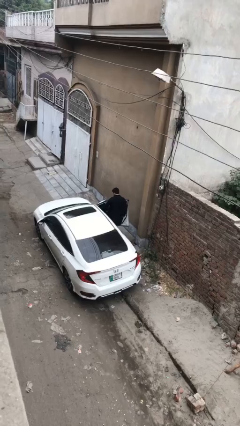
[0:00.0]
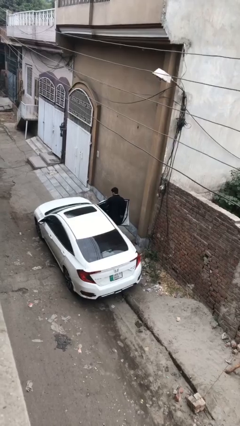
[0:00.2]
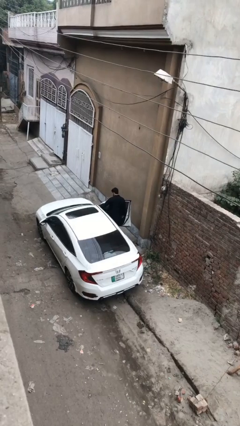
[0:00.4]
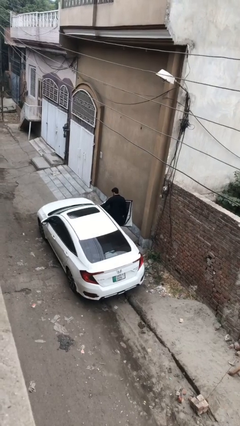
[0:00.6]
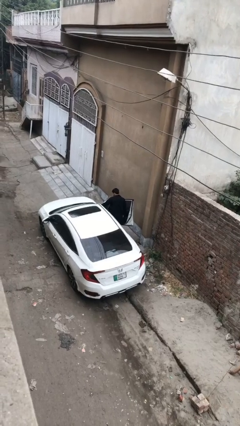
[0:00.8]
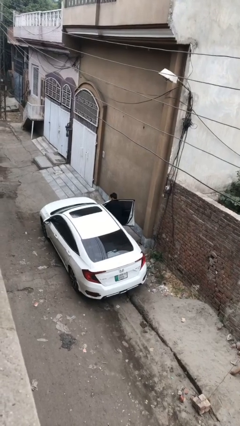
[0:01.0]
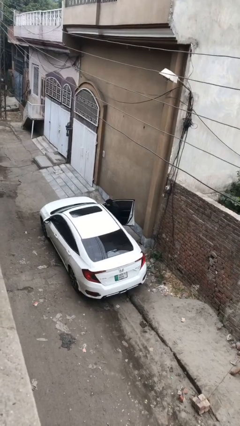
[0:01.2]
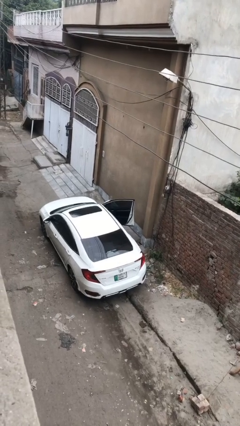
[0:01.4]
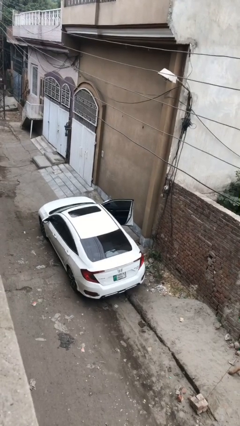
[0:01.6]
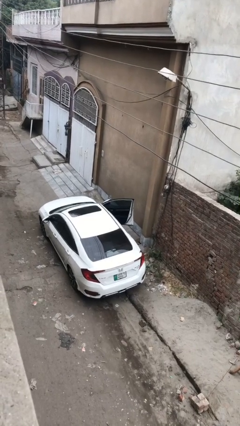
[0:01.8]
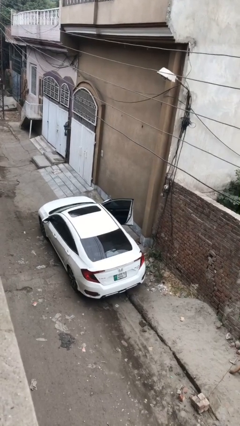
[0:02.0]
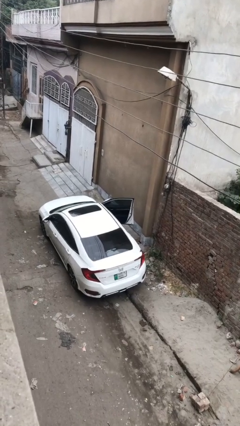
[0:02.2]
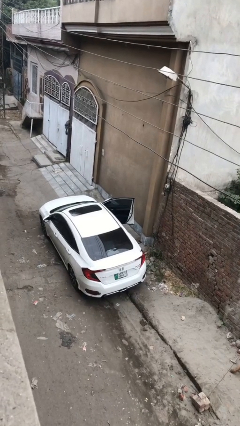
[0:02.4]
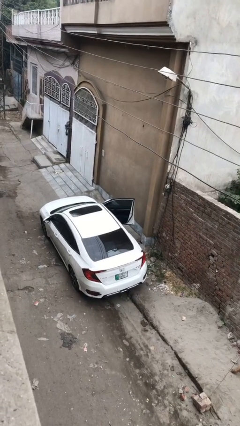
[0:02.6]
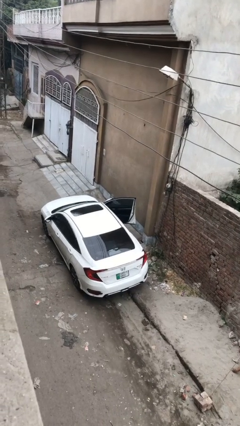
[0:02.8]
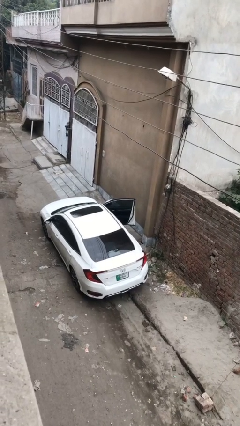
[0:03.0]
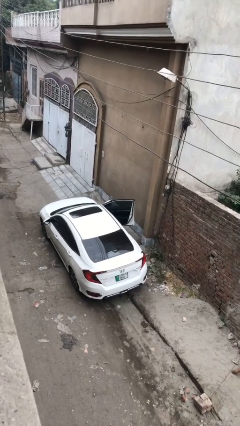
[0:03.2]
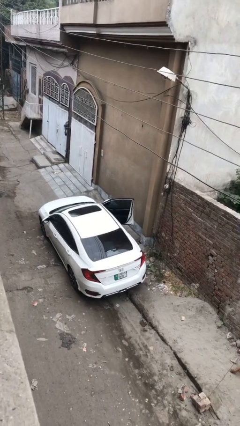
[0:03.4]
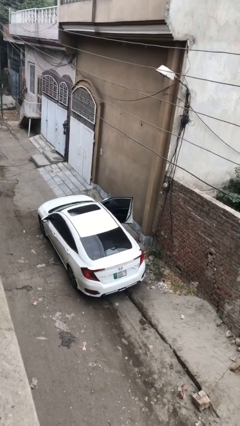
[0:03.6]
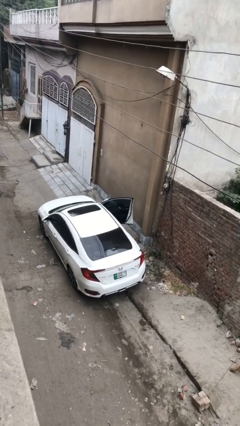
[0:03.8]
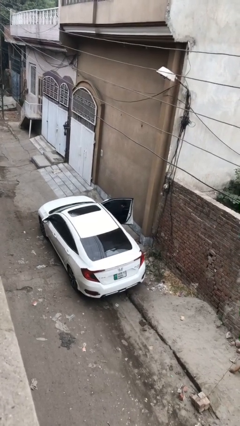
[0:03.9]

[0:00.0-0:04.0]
person enters car

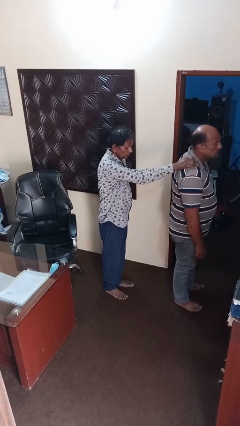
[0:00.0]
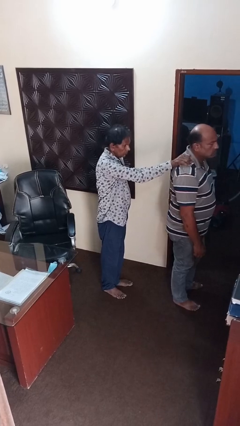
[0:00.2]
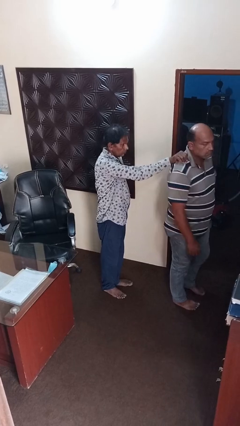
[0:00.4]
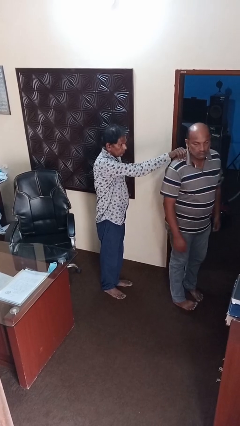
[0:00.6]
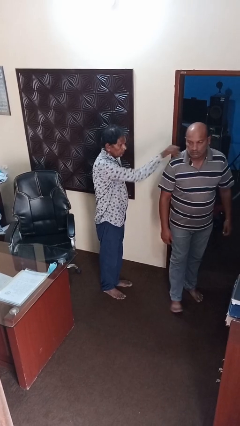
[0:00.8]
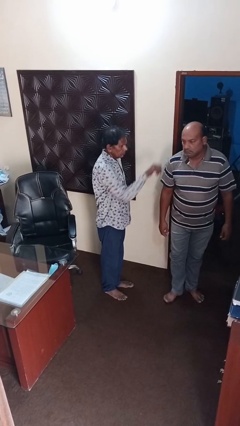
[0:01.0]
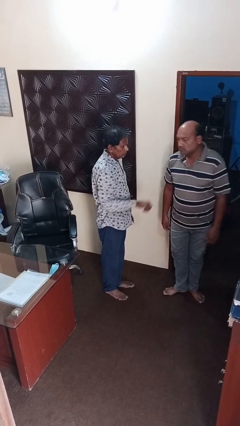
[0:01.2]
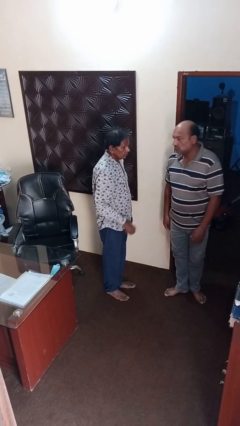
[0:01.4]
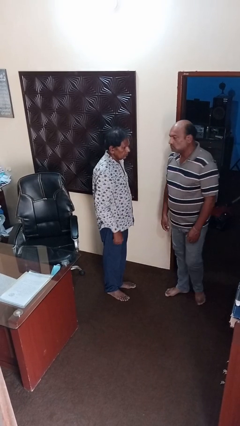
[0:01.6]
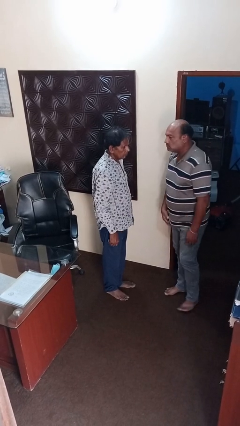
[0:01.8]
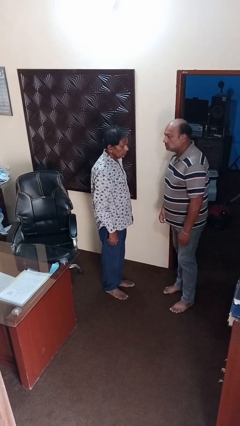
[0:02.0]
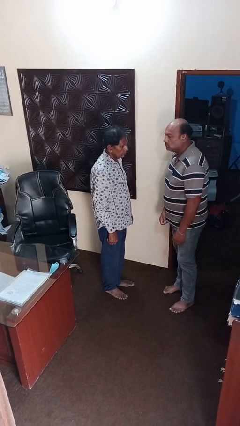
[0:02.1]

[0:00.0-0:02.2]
person spins person around

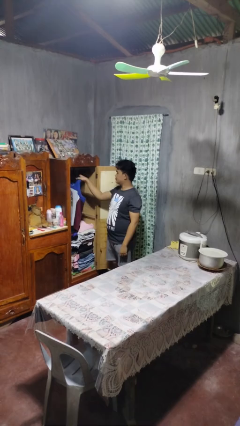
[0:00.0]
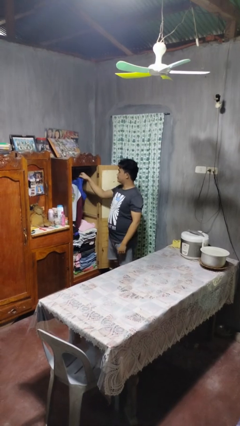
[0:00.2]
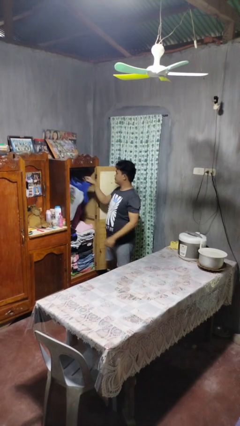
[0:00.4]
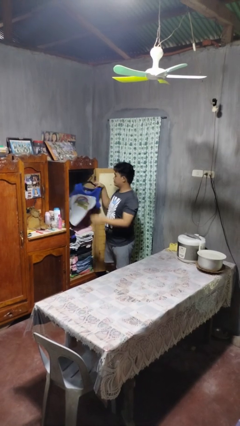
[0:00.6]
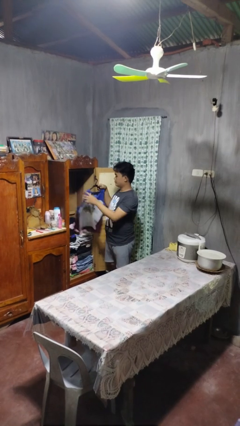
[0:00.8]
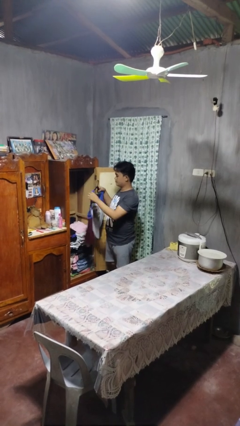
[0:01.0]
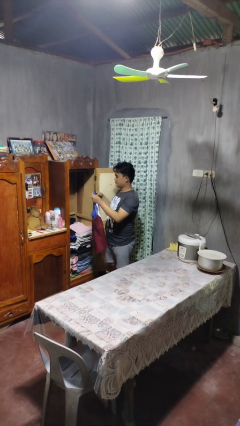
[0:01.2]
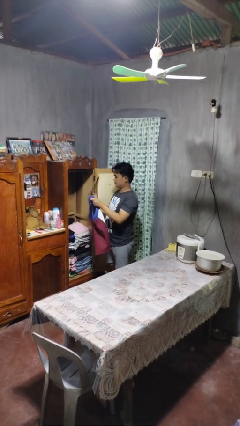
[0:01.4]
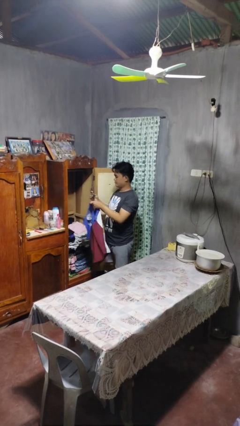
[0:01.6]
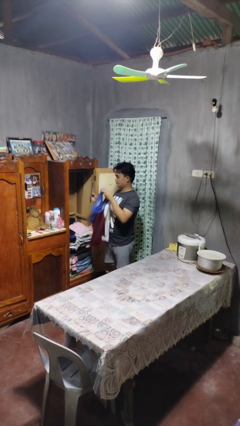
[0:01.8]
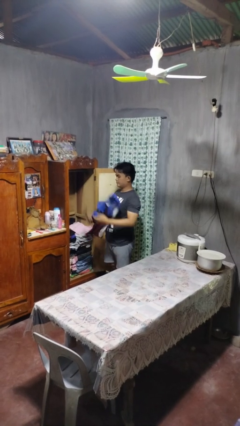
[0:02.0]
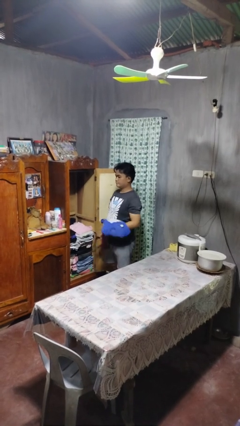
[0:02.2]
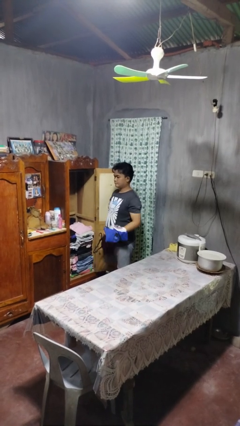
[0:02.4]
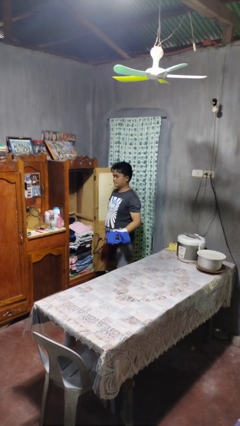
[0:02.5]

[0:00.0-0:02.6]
person takes clothes from closet

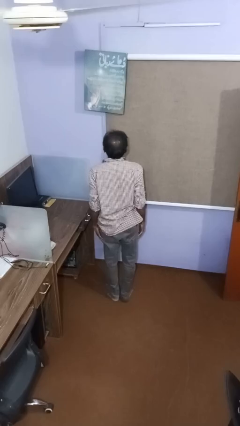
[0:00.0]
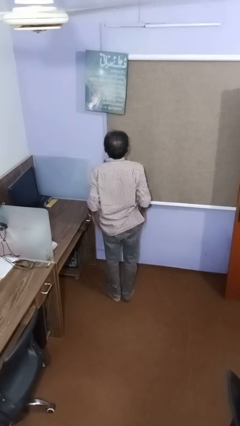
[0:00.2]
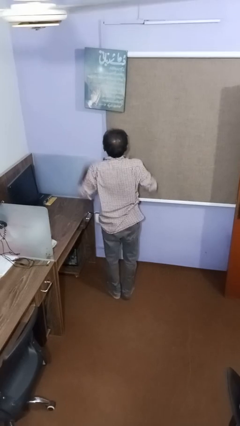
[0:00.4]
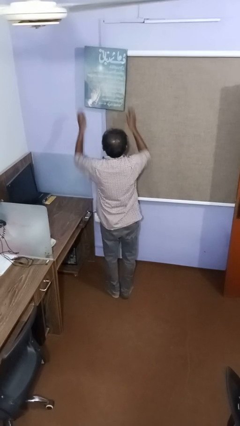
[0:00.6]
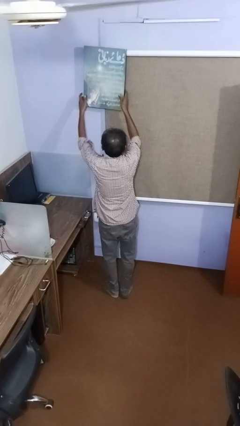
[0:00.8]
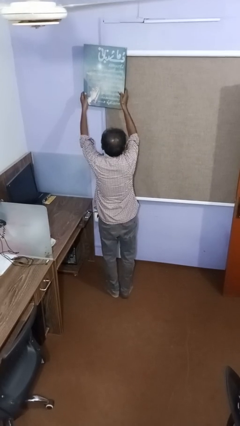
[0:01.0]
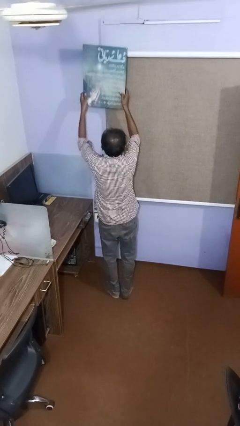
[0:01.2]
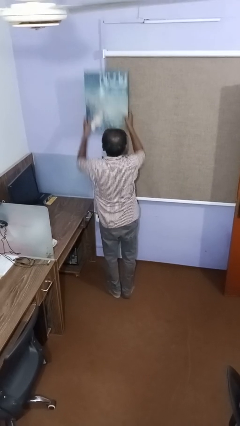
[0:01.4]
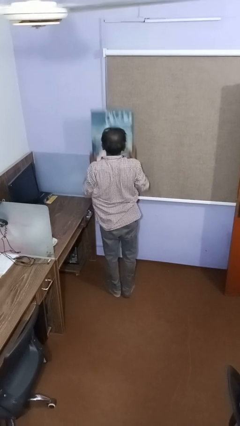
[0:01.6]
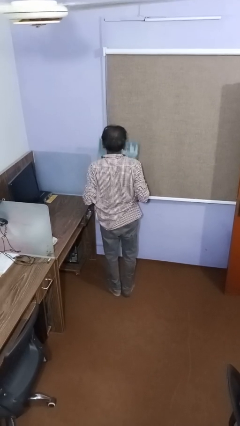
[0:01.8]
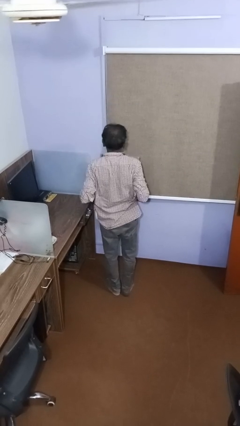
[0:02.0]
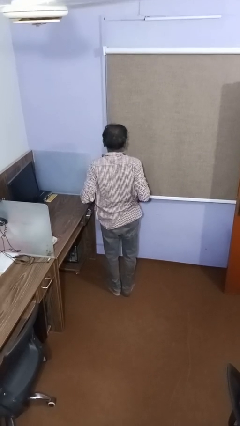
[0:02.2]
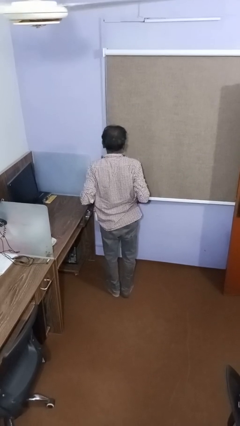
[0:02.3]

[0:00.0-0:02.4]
person takes down picture frame

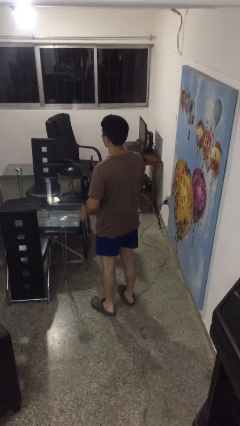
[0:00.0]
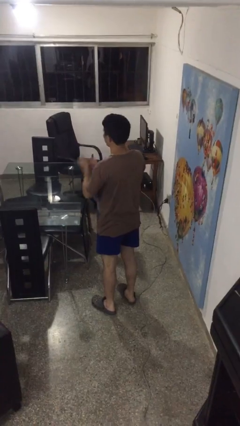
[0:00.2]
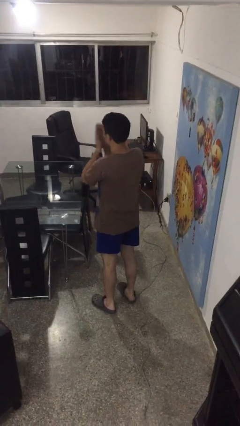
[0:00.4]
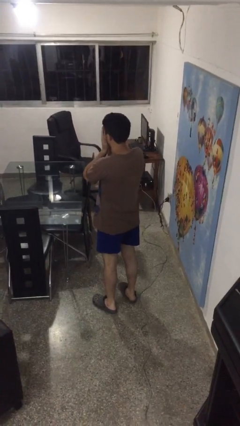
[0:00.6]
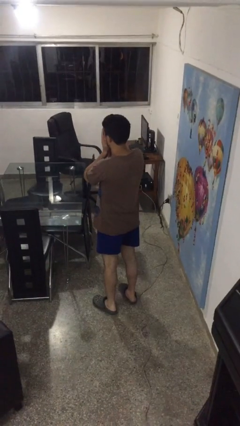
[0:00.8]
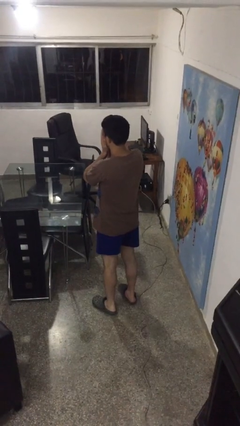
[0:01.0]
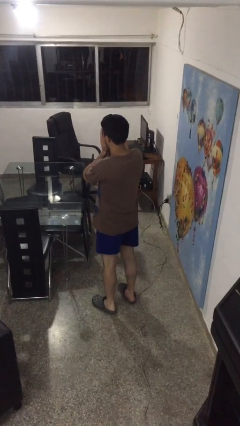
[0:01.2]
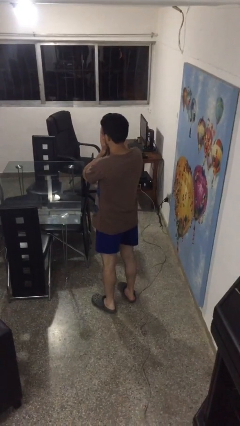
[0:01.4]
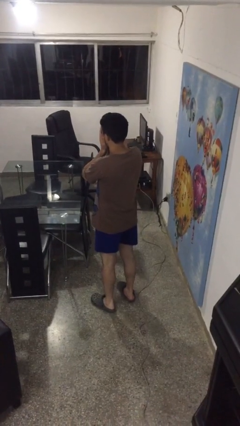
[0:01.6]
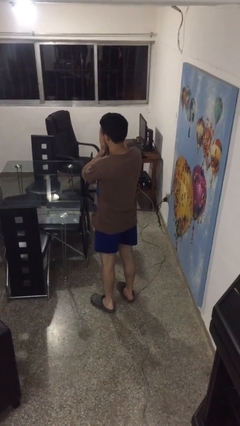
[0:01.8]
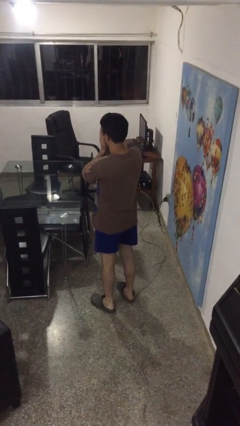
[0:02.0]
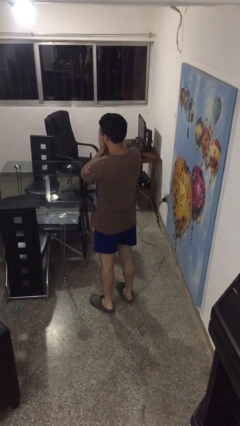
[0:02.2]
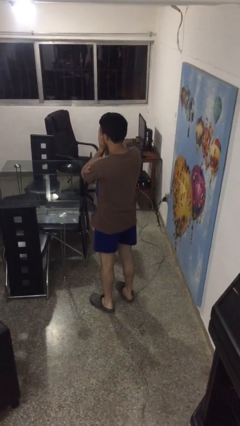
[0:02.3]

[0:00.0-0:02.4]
person covers face with hands

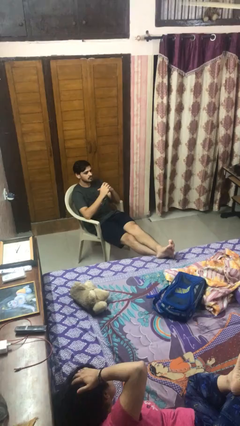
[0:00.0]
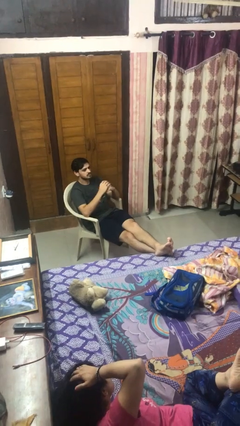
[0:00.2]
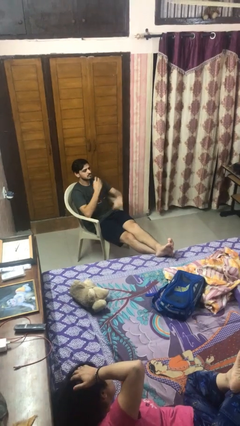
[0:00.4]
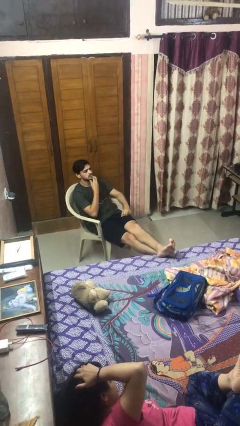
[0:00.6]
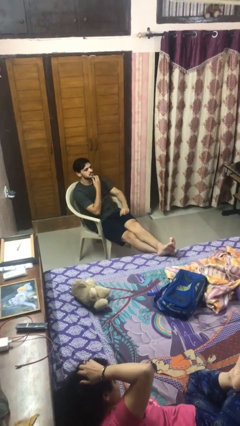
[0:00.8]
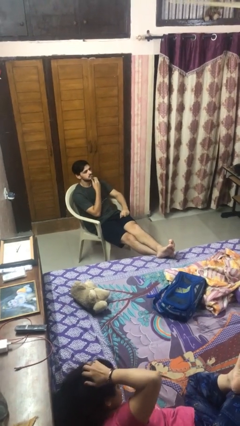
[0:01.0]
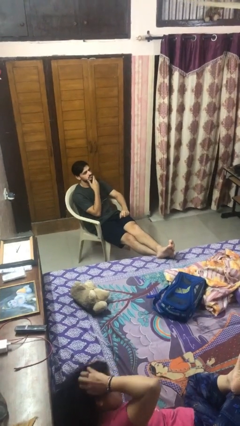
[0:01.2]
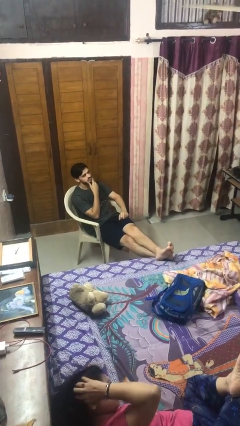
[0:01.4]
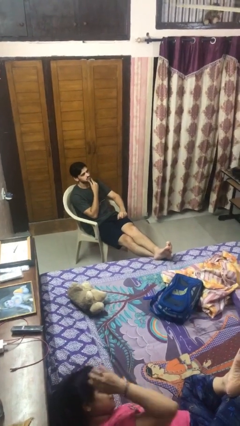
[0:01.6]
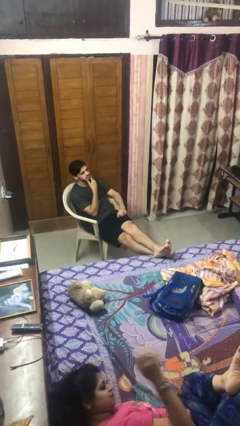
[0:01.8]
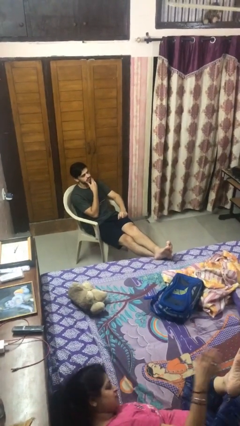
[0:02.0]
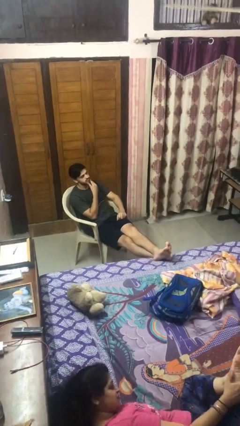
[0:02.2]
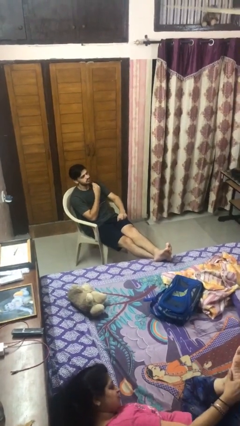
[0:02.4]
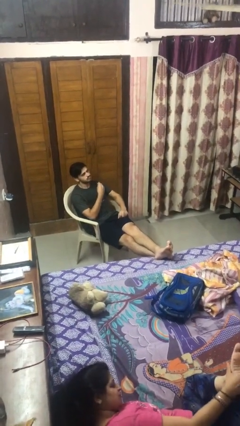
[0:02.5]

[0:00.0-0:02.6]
person strokes chin

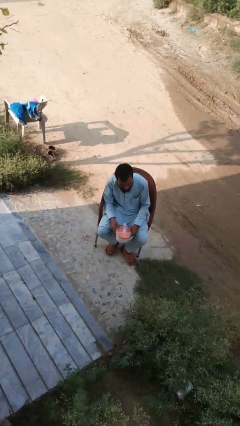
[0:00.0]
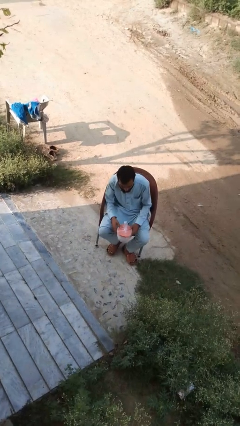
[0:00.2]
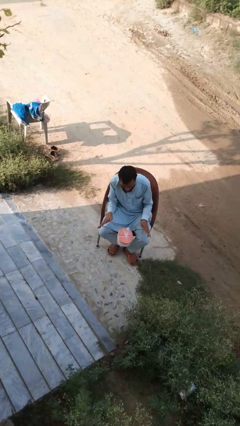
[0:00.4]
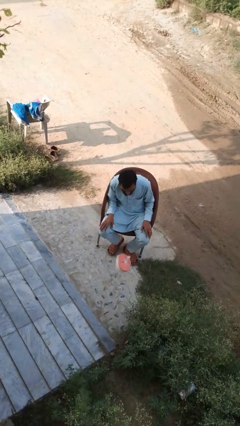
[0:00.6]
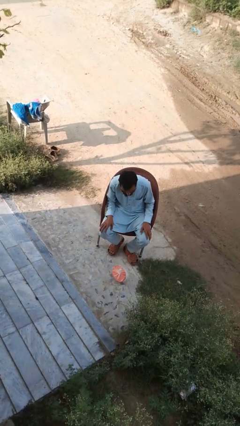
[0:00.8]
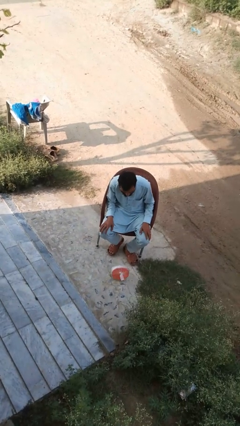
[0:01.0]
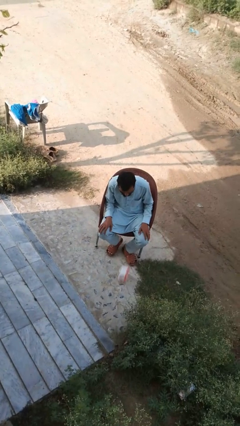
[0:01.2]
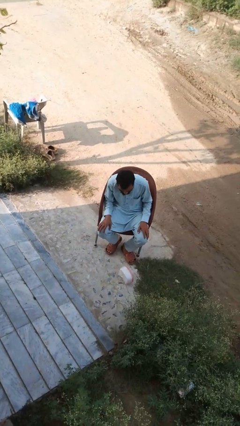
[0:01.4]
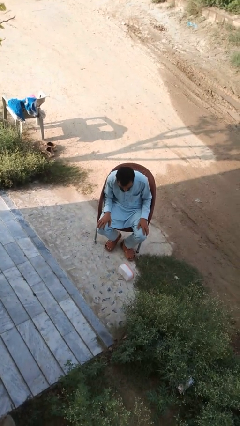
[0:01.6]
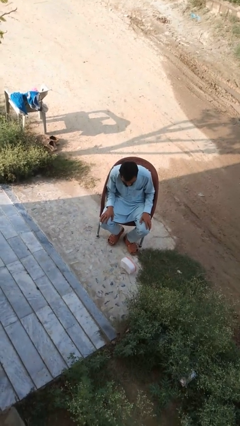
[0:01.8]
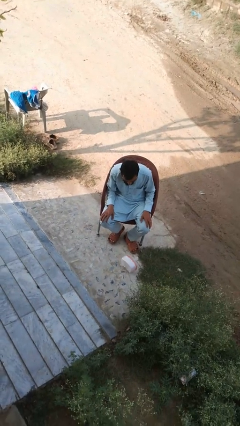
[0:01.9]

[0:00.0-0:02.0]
person drops object
